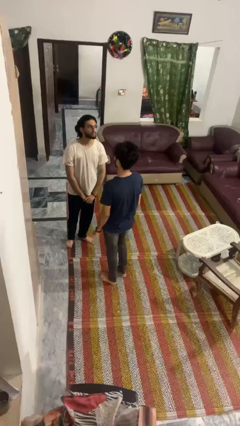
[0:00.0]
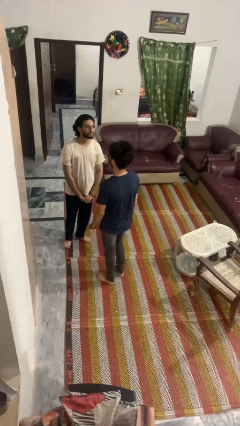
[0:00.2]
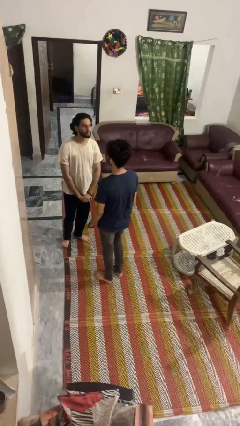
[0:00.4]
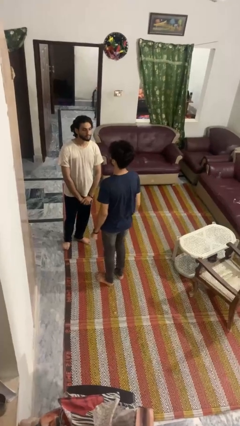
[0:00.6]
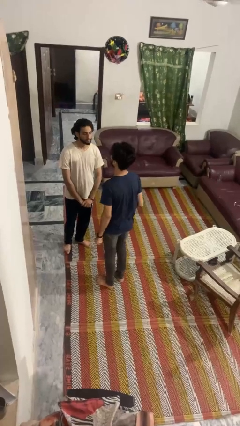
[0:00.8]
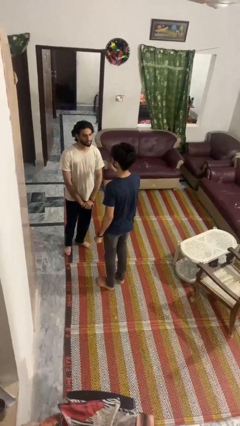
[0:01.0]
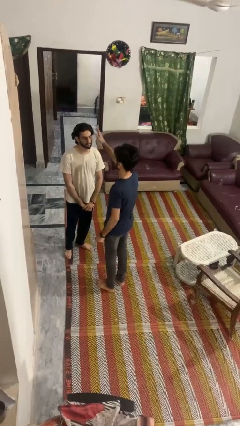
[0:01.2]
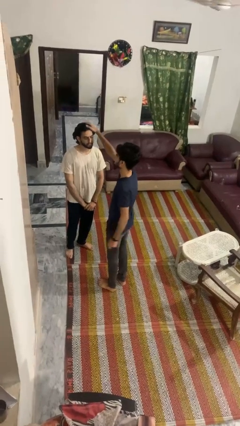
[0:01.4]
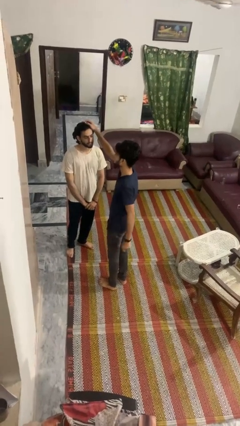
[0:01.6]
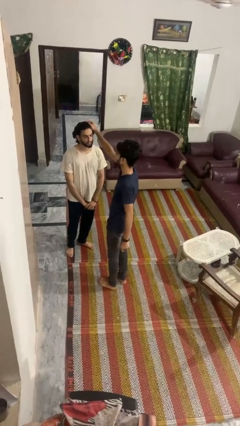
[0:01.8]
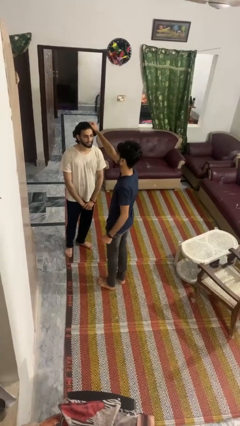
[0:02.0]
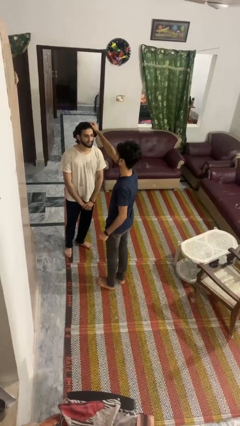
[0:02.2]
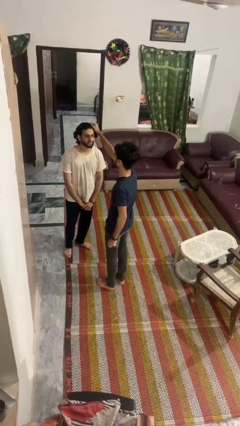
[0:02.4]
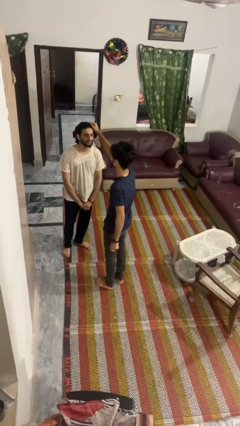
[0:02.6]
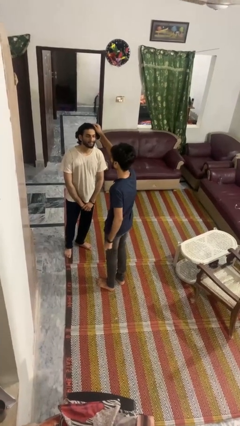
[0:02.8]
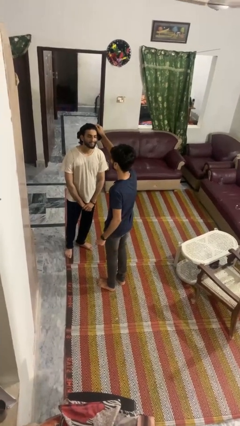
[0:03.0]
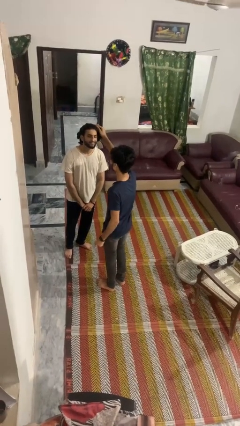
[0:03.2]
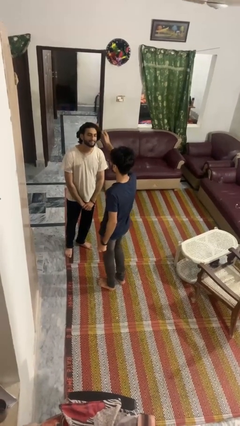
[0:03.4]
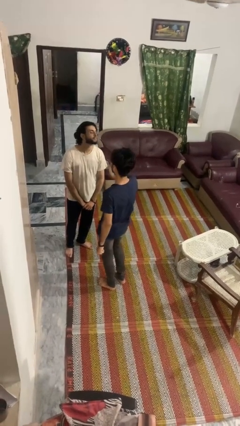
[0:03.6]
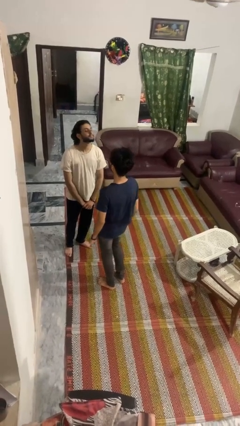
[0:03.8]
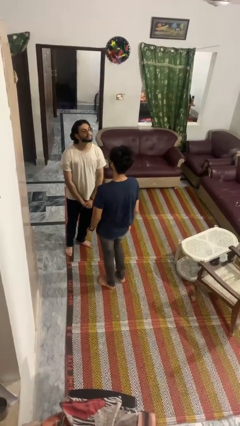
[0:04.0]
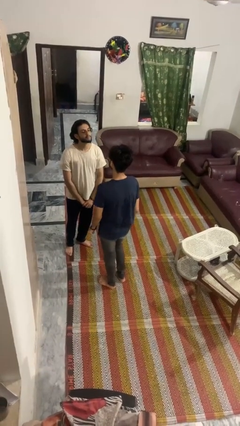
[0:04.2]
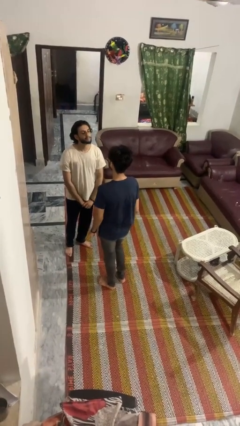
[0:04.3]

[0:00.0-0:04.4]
person grabs person by hair

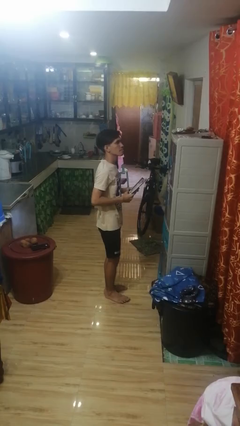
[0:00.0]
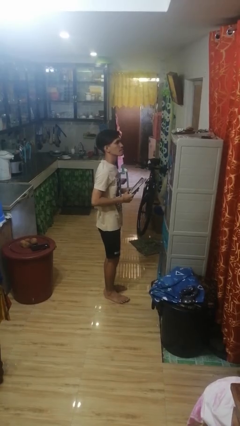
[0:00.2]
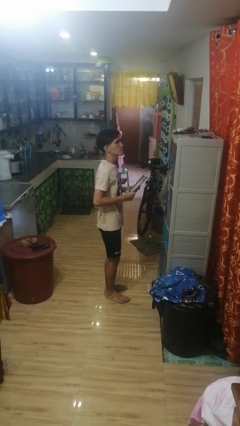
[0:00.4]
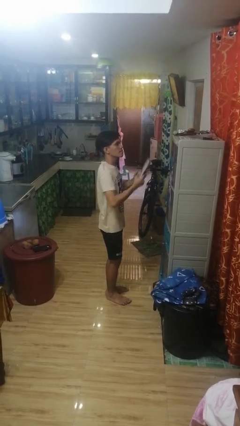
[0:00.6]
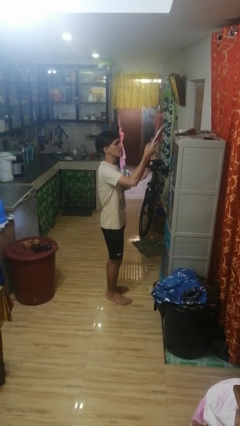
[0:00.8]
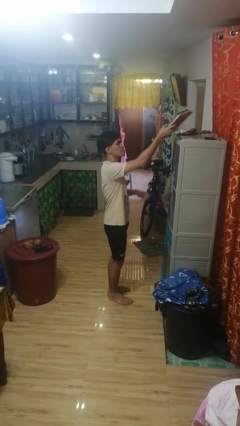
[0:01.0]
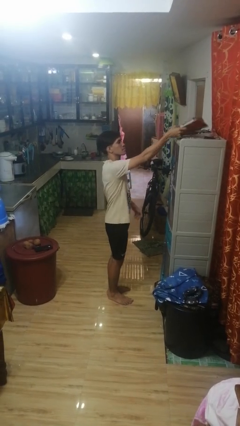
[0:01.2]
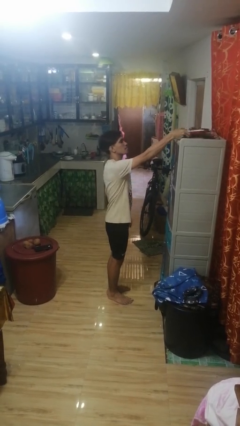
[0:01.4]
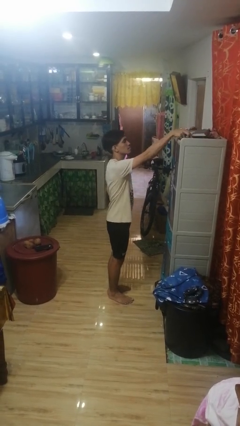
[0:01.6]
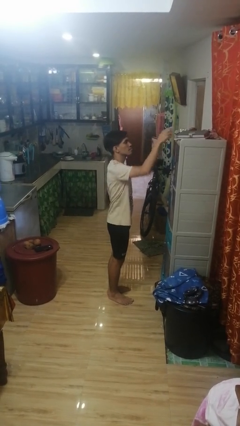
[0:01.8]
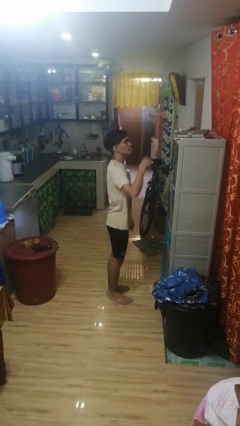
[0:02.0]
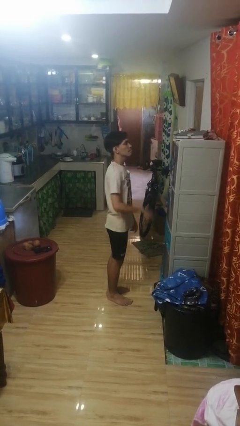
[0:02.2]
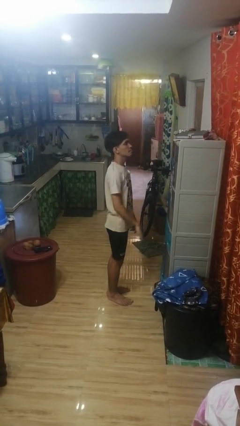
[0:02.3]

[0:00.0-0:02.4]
person puts down object on shelf

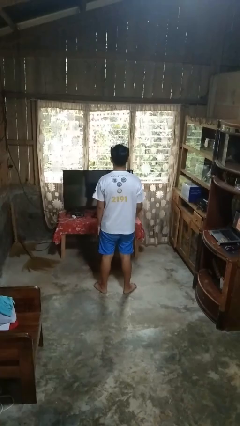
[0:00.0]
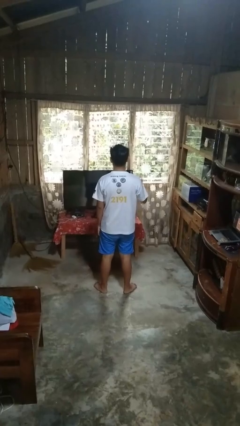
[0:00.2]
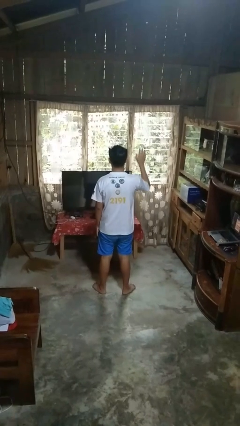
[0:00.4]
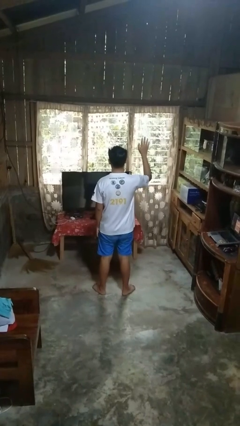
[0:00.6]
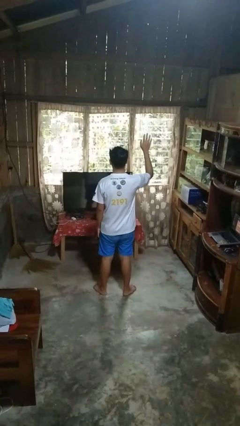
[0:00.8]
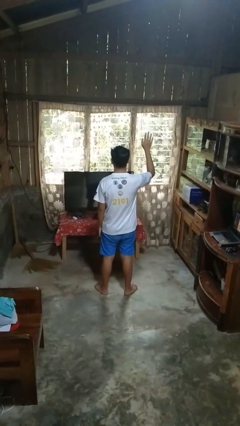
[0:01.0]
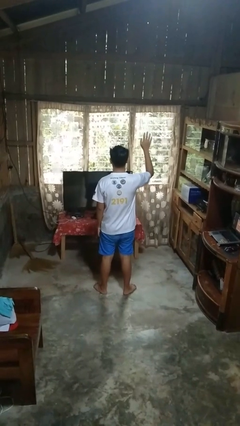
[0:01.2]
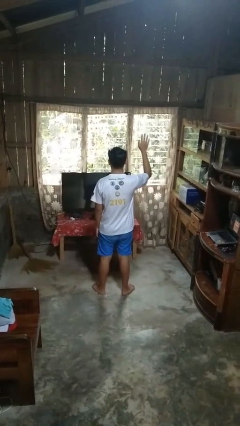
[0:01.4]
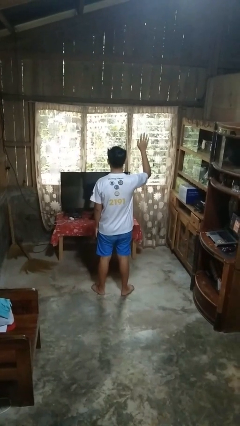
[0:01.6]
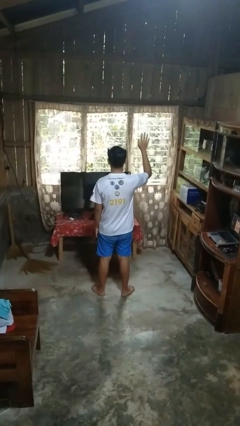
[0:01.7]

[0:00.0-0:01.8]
person gestures raise hand

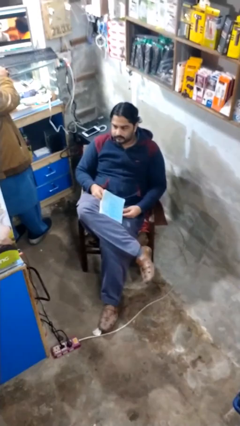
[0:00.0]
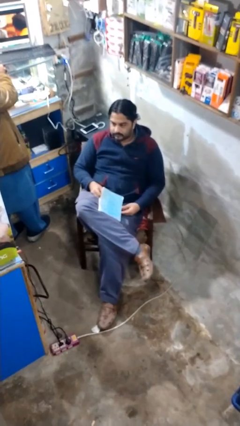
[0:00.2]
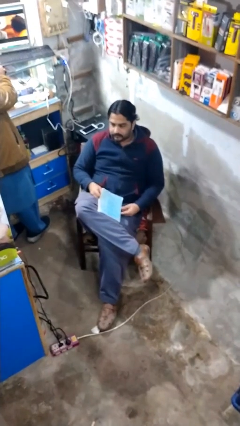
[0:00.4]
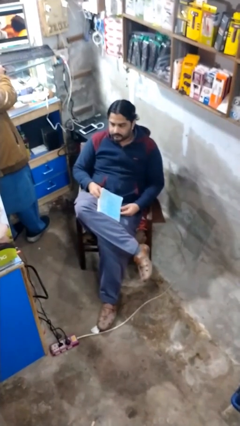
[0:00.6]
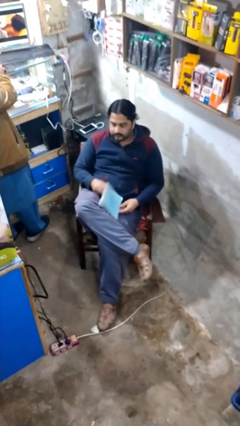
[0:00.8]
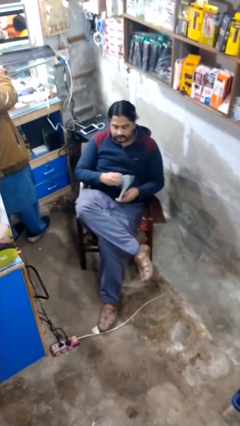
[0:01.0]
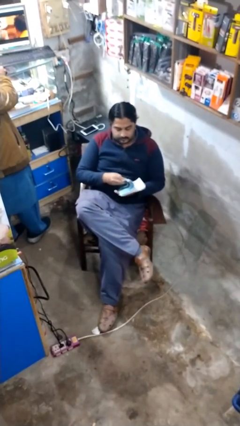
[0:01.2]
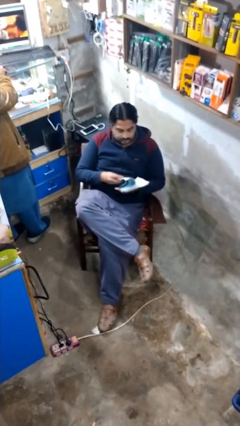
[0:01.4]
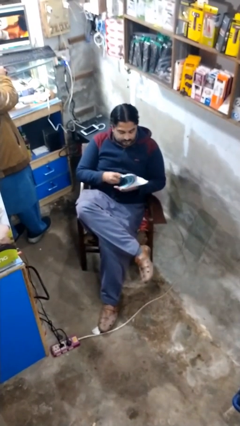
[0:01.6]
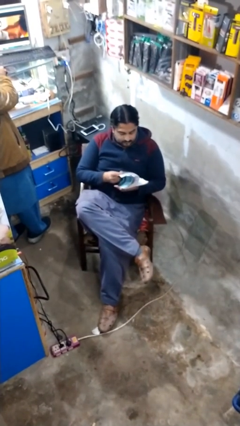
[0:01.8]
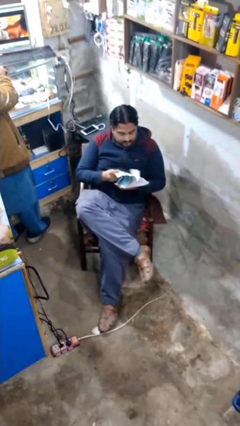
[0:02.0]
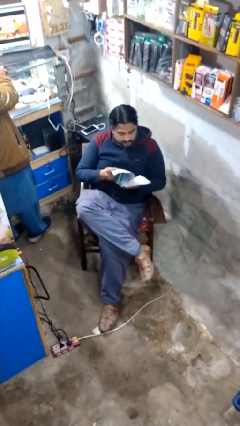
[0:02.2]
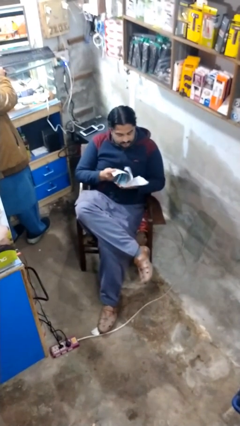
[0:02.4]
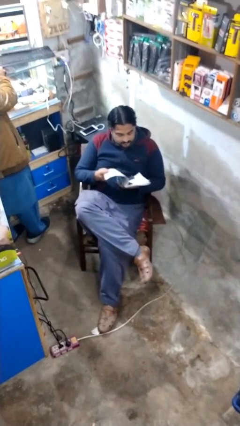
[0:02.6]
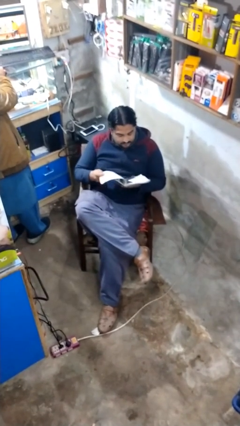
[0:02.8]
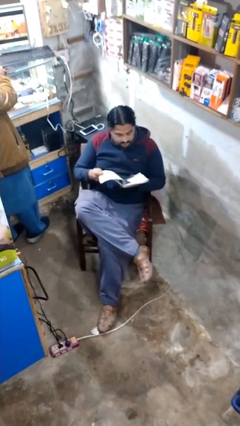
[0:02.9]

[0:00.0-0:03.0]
person reads document

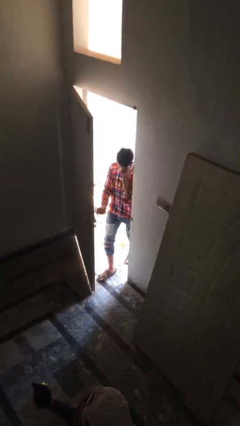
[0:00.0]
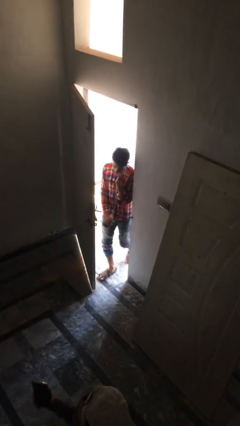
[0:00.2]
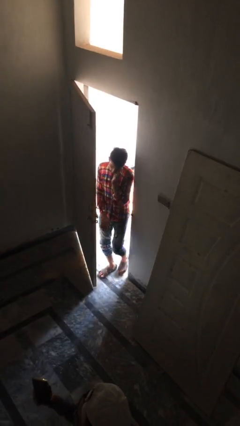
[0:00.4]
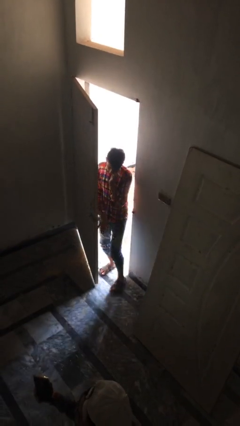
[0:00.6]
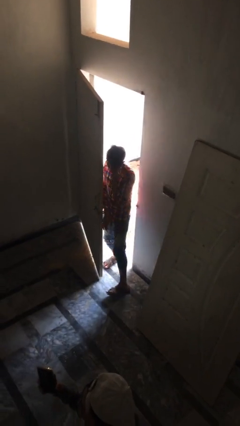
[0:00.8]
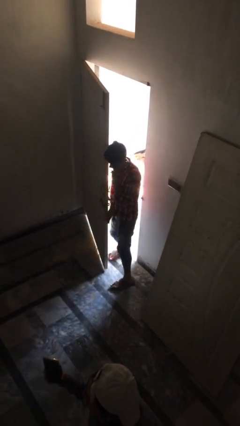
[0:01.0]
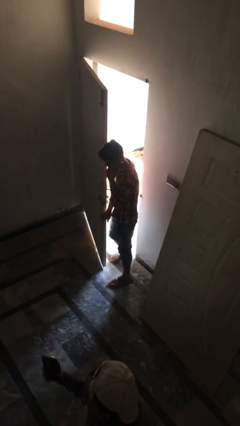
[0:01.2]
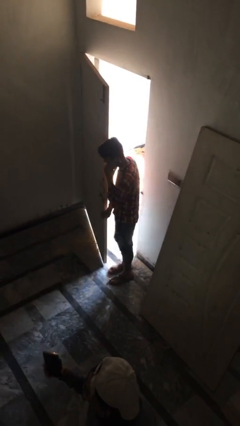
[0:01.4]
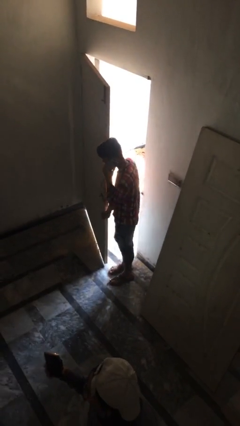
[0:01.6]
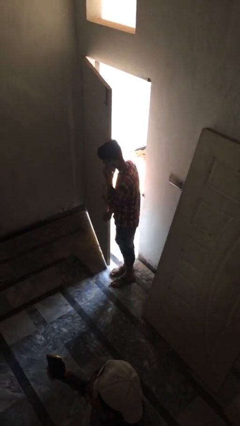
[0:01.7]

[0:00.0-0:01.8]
person enters scene through structure

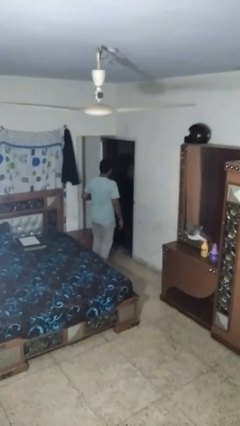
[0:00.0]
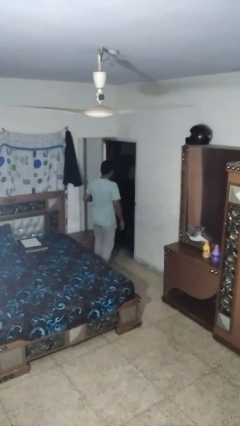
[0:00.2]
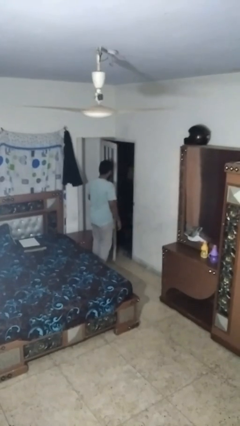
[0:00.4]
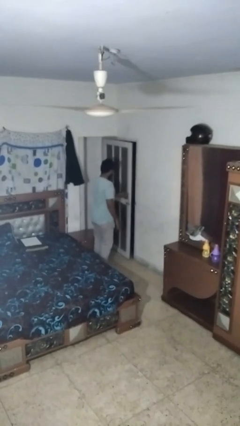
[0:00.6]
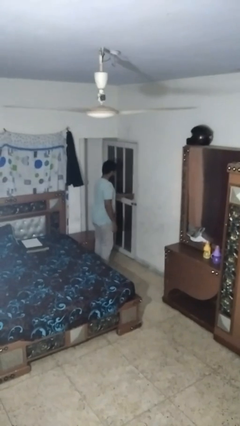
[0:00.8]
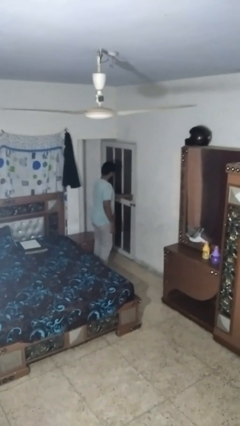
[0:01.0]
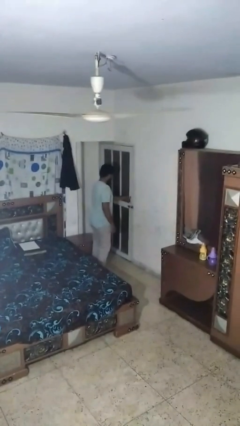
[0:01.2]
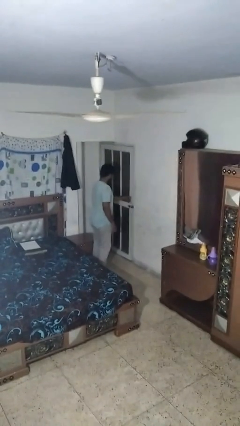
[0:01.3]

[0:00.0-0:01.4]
person closes facility door

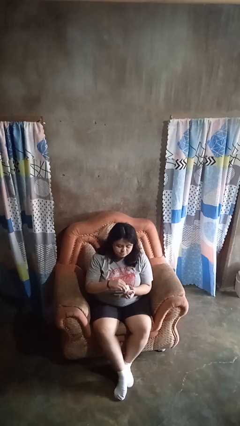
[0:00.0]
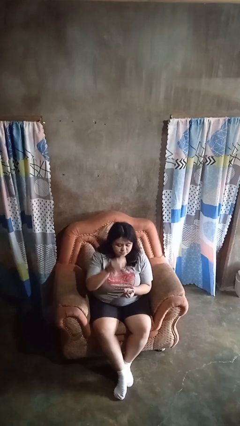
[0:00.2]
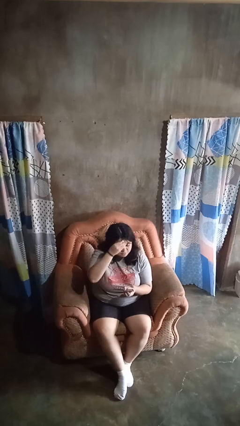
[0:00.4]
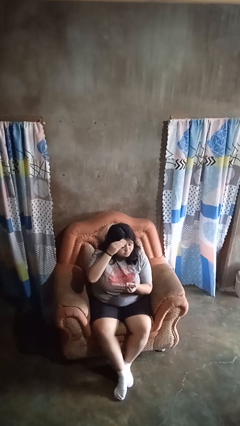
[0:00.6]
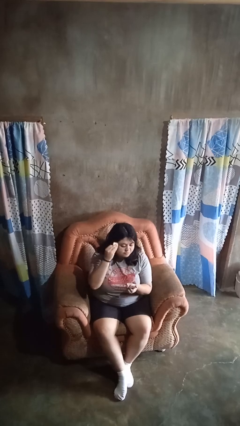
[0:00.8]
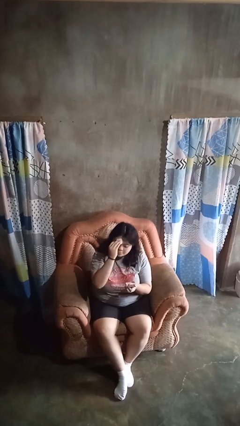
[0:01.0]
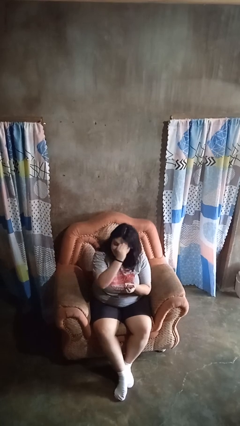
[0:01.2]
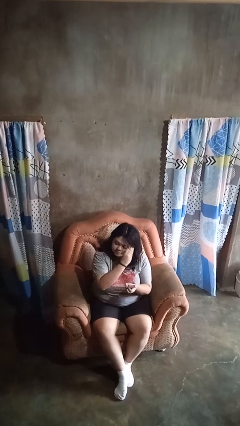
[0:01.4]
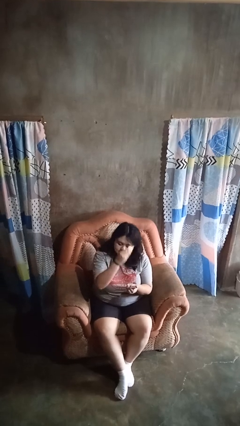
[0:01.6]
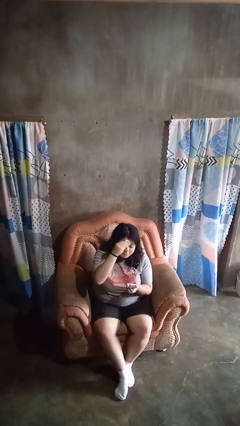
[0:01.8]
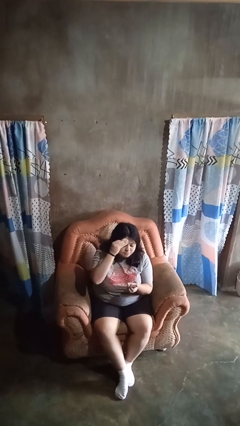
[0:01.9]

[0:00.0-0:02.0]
person applies foundation makeup

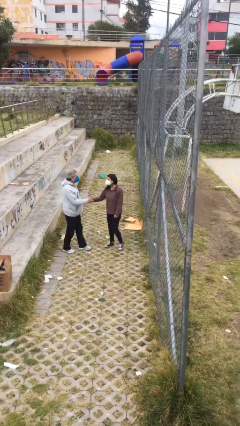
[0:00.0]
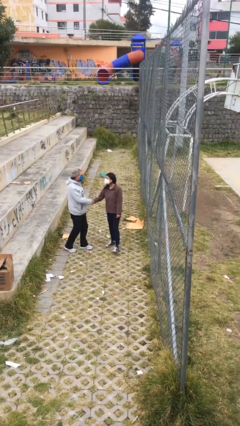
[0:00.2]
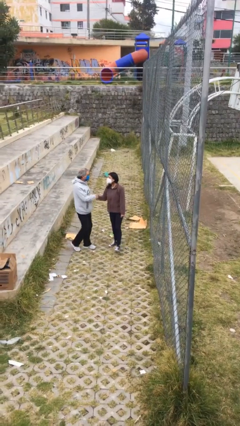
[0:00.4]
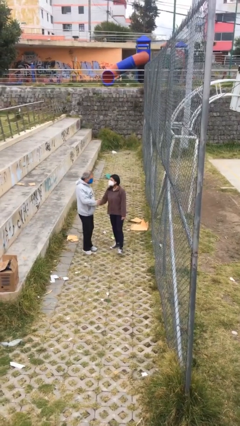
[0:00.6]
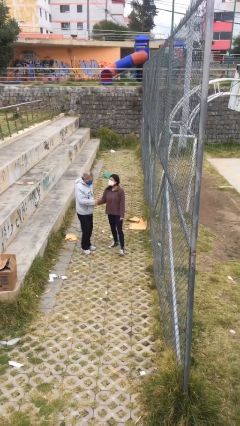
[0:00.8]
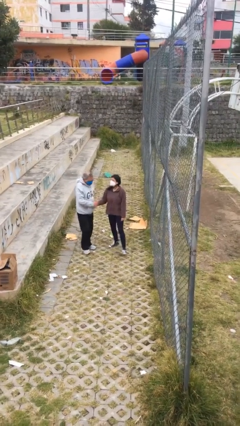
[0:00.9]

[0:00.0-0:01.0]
person shakes hand
